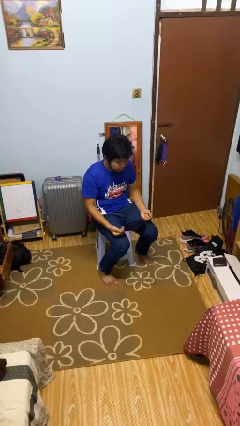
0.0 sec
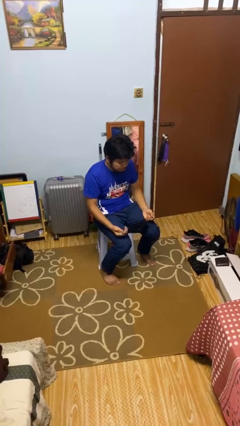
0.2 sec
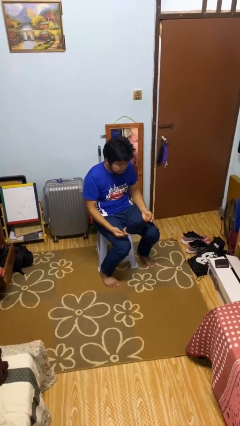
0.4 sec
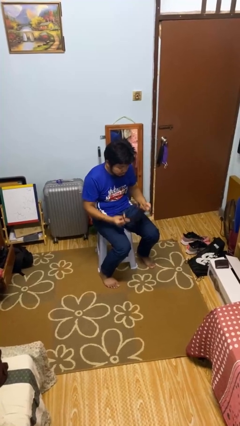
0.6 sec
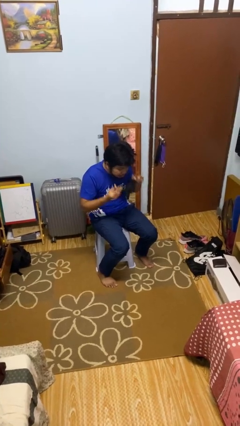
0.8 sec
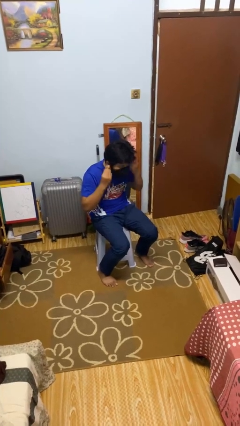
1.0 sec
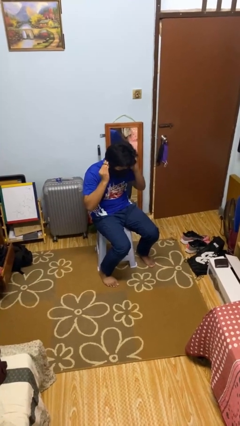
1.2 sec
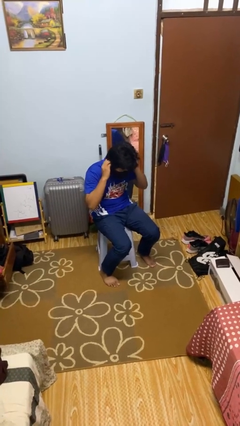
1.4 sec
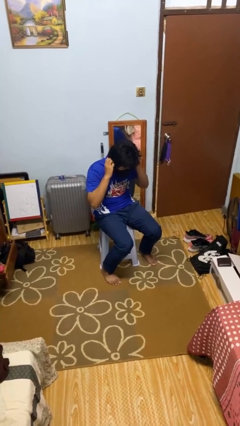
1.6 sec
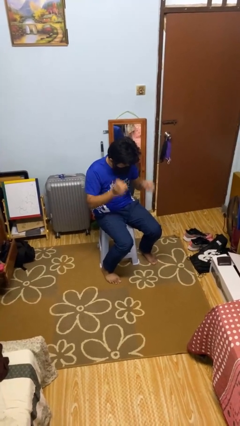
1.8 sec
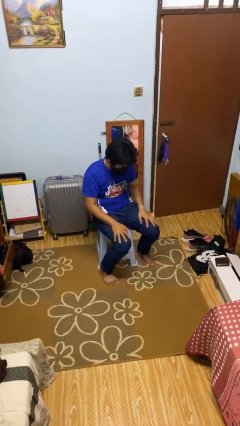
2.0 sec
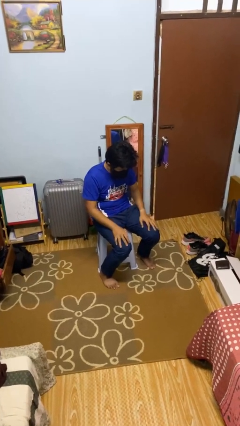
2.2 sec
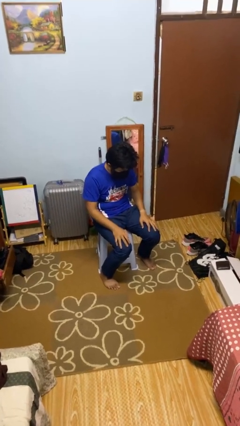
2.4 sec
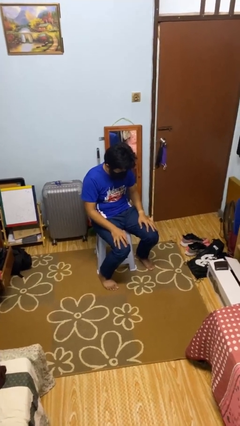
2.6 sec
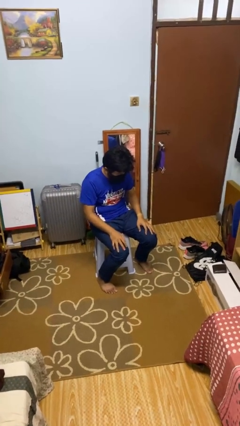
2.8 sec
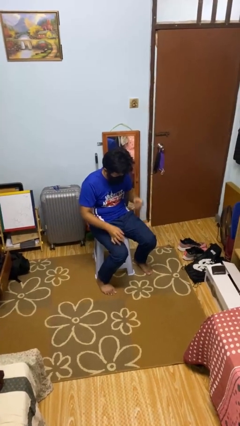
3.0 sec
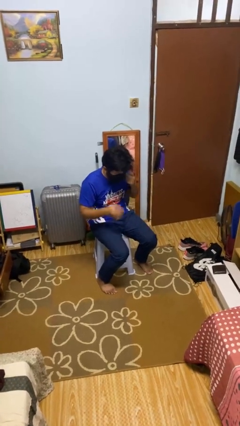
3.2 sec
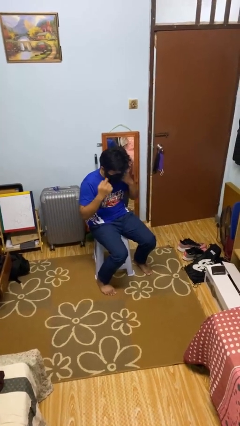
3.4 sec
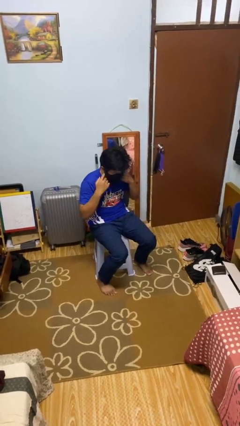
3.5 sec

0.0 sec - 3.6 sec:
person puts on facemask

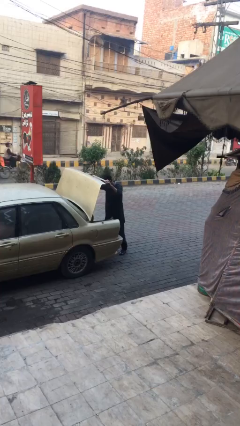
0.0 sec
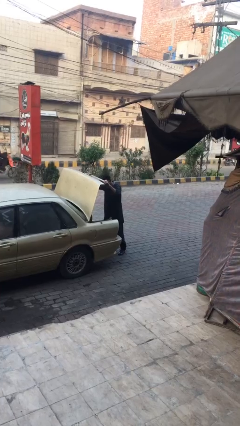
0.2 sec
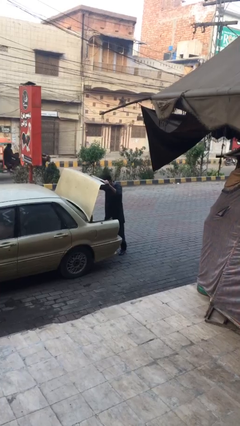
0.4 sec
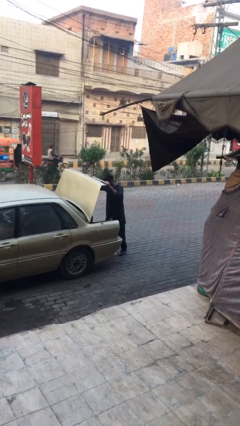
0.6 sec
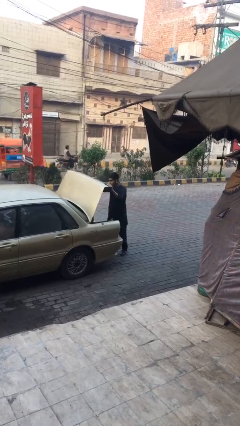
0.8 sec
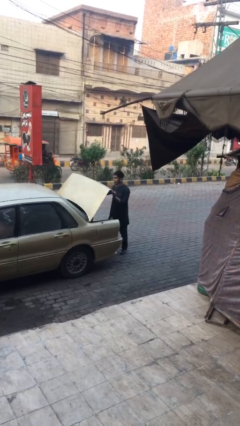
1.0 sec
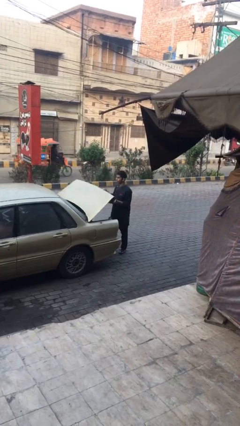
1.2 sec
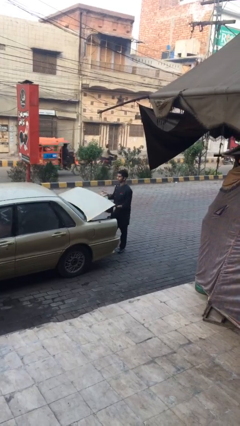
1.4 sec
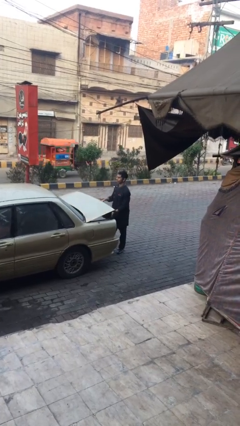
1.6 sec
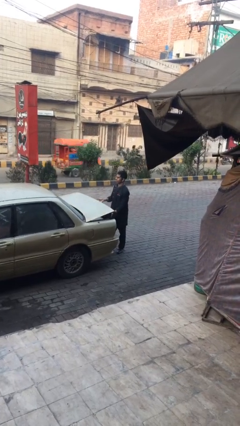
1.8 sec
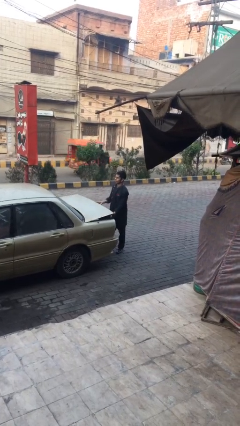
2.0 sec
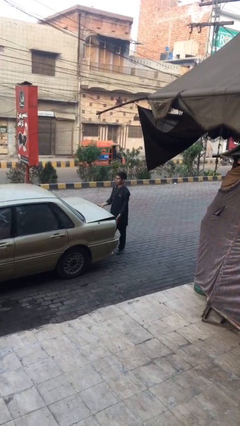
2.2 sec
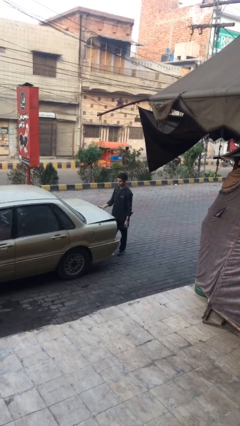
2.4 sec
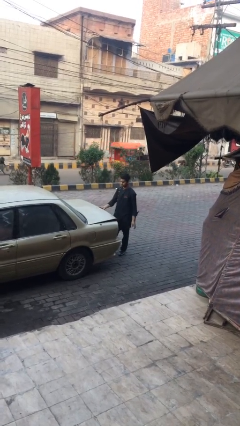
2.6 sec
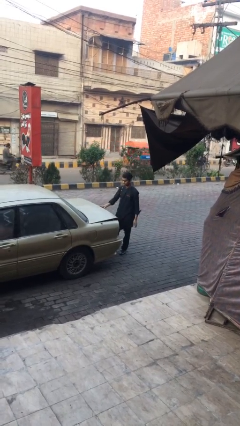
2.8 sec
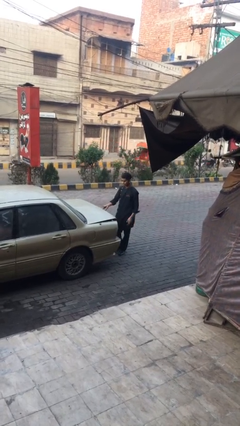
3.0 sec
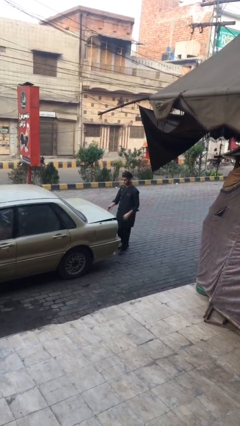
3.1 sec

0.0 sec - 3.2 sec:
person closes car trunk

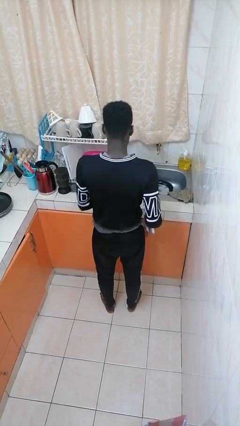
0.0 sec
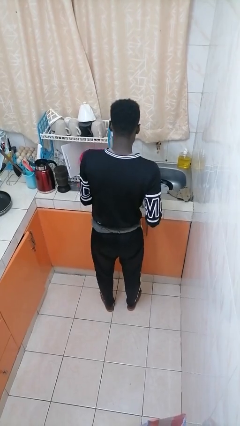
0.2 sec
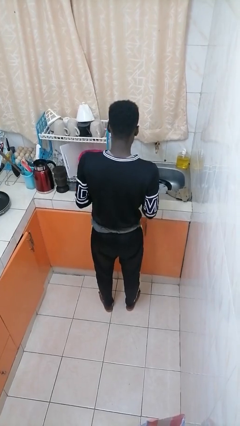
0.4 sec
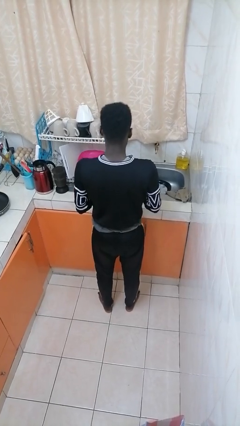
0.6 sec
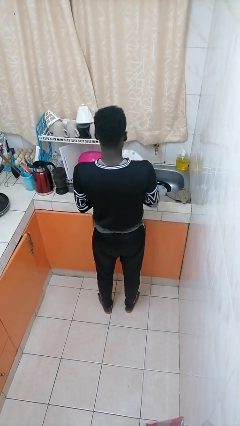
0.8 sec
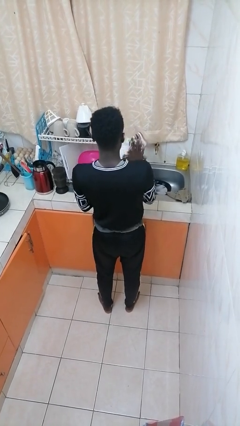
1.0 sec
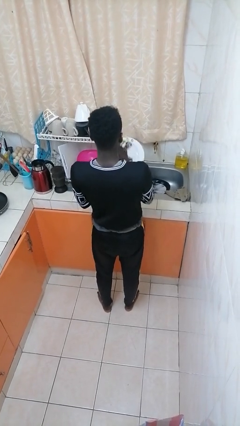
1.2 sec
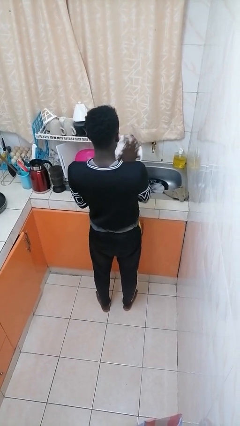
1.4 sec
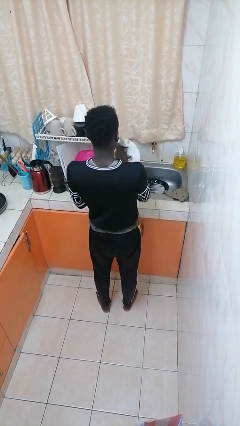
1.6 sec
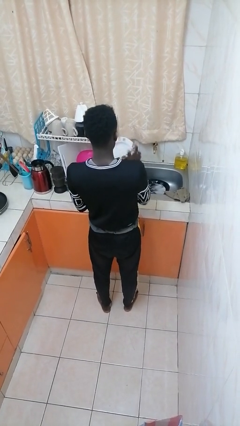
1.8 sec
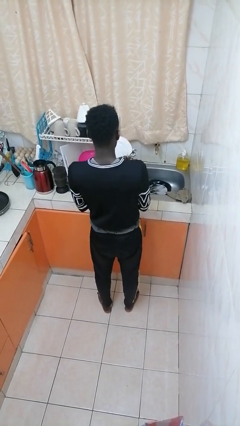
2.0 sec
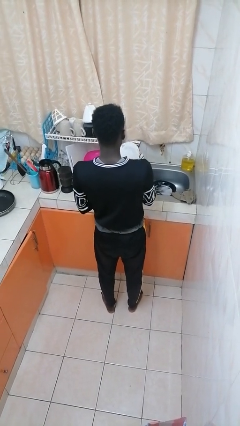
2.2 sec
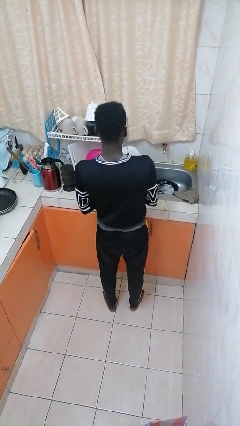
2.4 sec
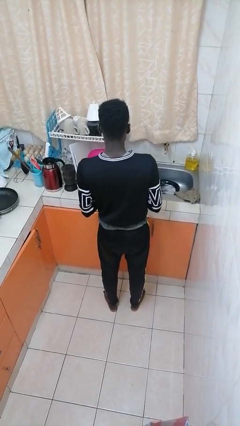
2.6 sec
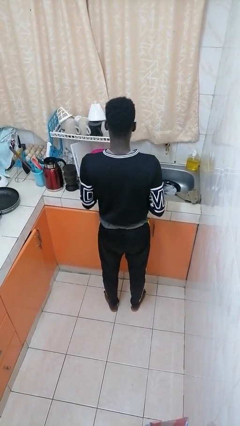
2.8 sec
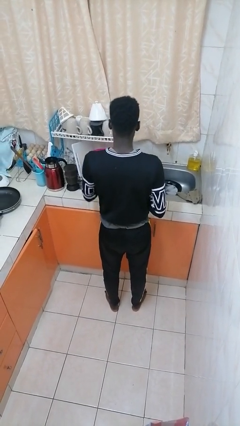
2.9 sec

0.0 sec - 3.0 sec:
person dries dish

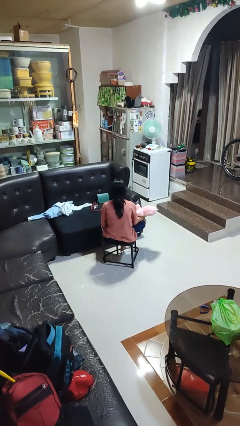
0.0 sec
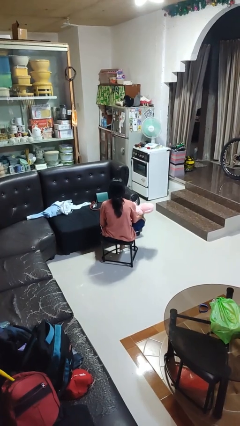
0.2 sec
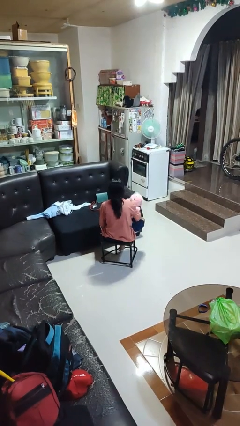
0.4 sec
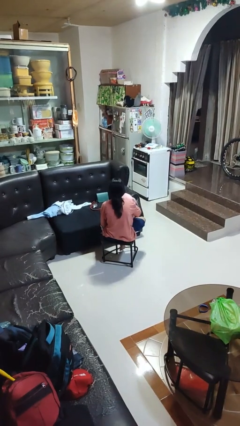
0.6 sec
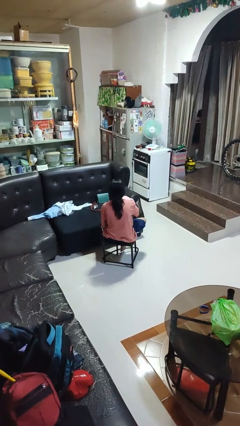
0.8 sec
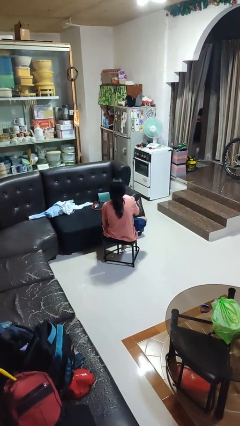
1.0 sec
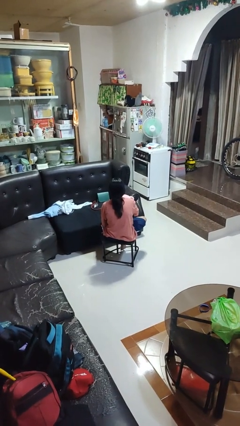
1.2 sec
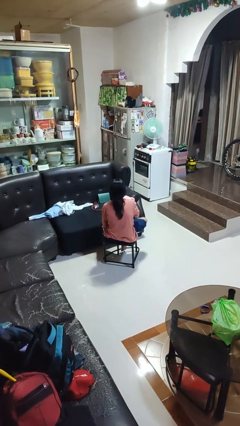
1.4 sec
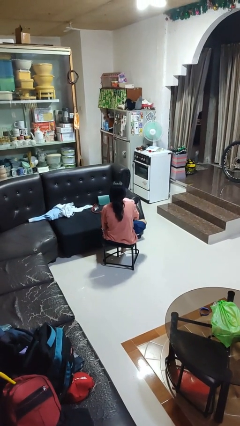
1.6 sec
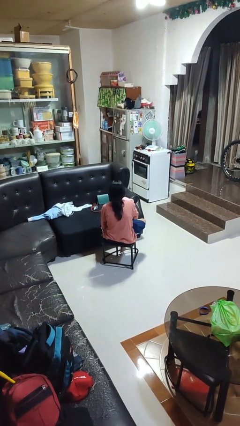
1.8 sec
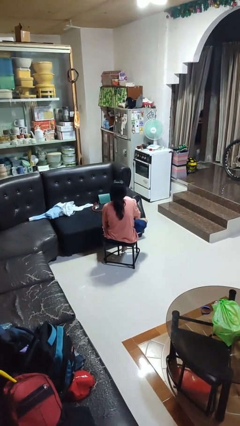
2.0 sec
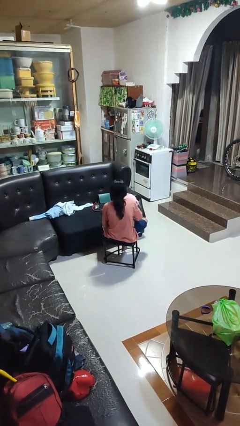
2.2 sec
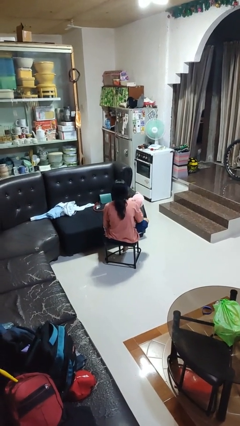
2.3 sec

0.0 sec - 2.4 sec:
person hugs stuffed animal

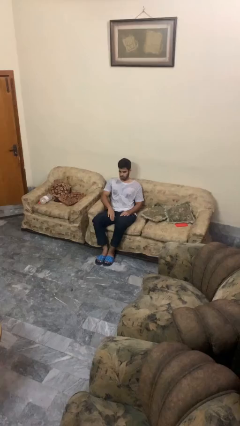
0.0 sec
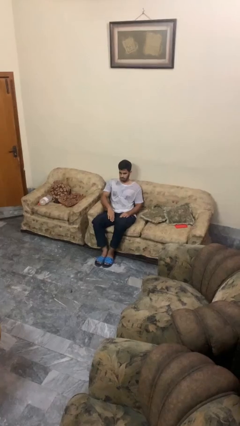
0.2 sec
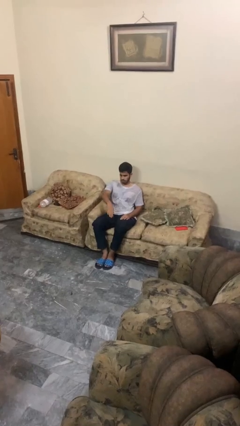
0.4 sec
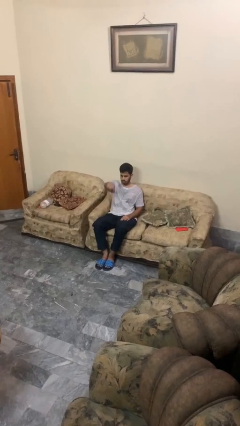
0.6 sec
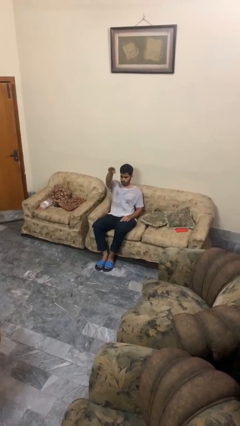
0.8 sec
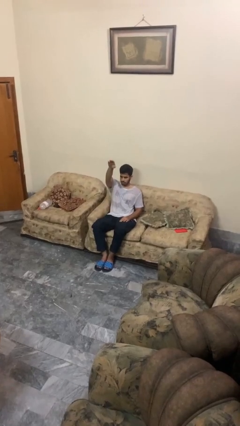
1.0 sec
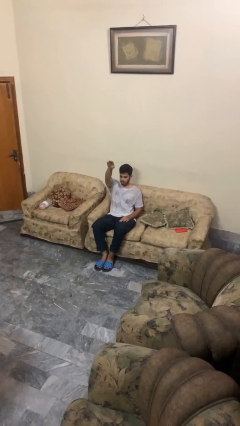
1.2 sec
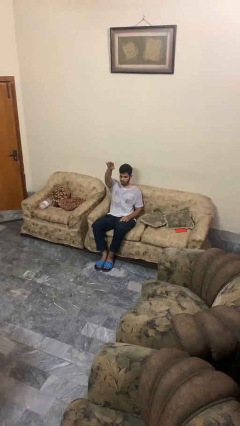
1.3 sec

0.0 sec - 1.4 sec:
person gestures swipe up

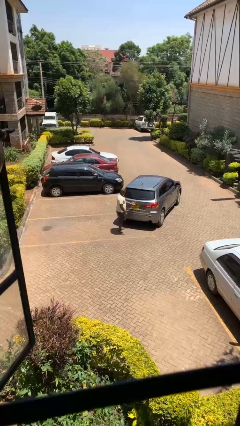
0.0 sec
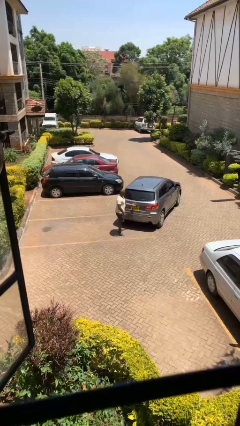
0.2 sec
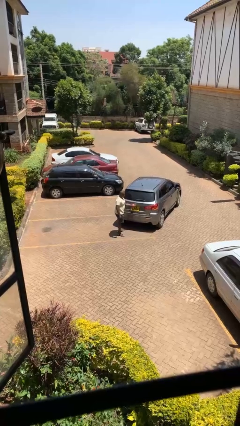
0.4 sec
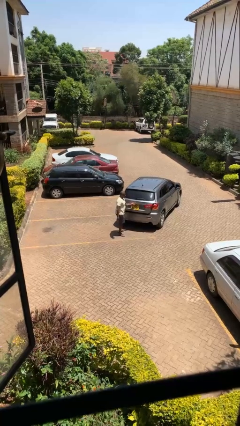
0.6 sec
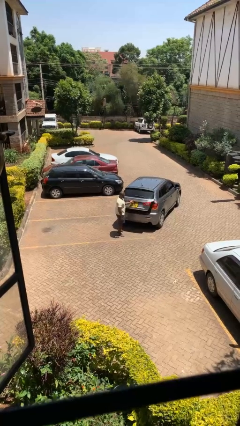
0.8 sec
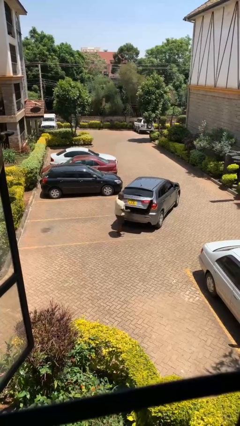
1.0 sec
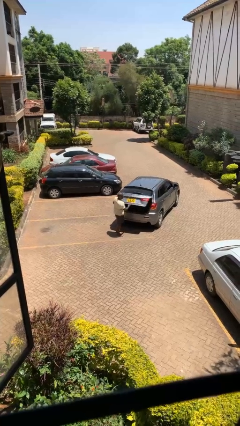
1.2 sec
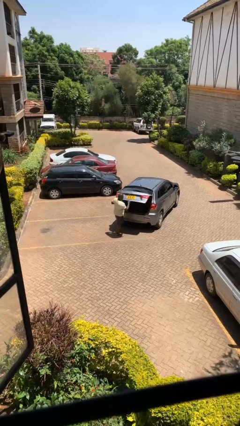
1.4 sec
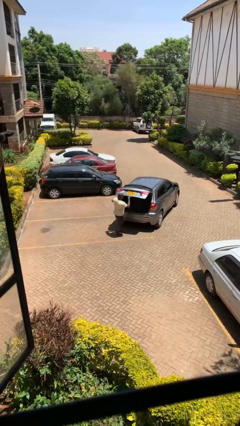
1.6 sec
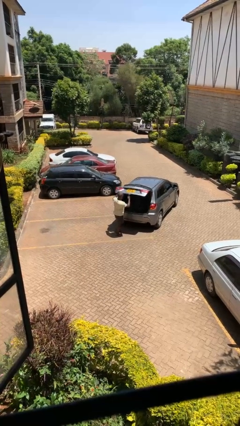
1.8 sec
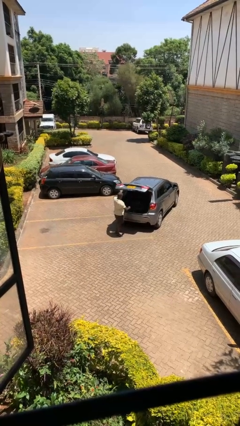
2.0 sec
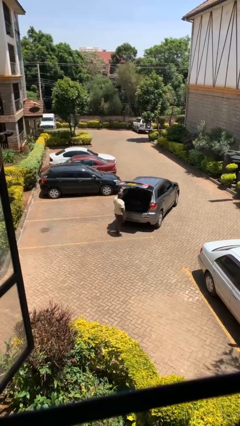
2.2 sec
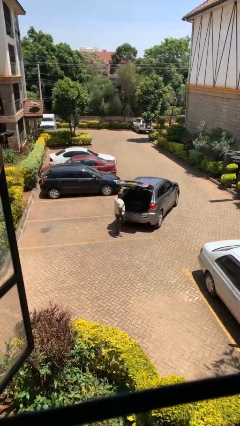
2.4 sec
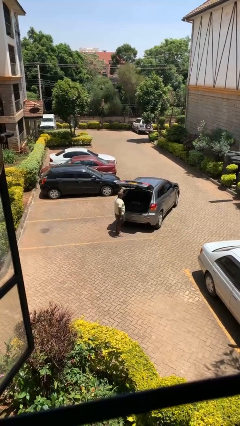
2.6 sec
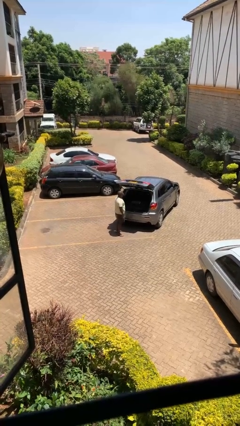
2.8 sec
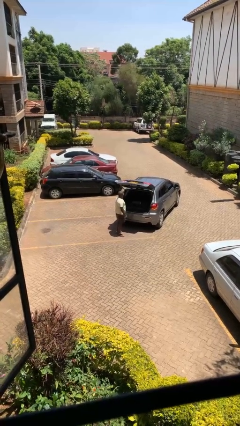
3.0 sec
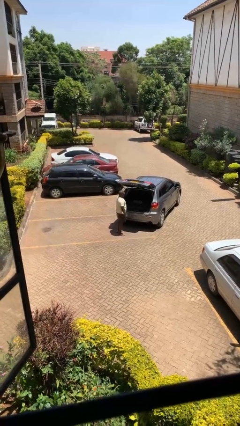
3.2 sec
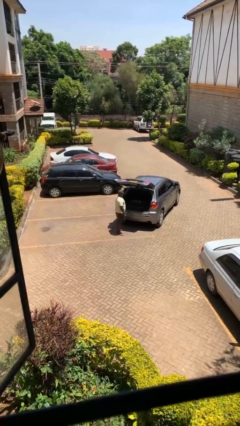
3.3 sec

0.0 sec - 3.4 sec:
person opens car trunk

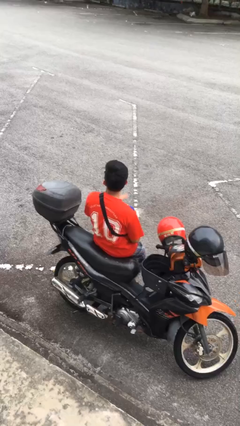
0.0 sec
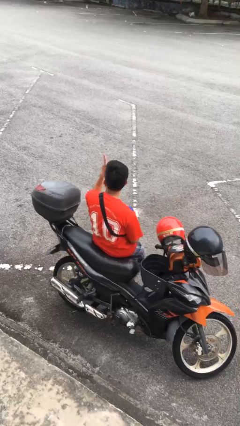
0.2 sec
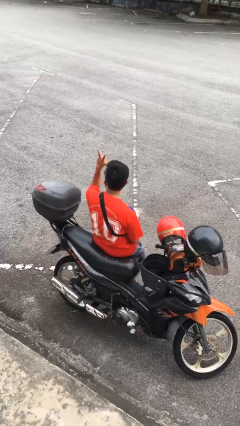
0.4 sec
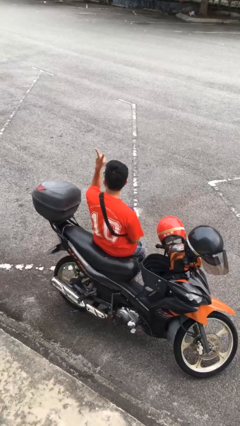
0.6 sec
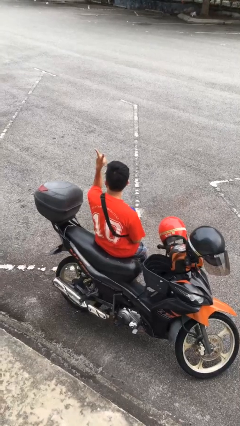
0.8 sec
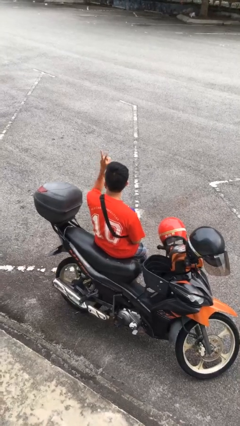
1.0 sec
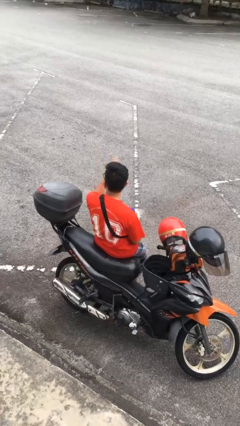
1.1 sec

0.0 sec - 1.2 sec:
person gestures peace
